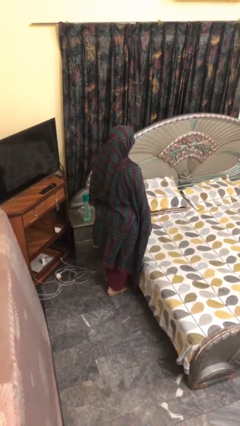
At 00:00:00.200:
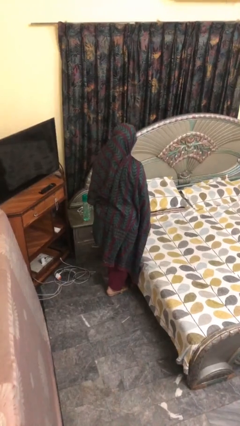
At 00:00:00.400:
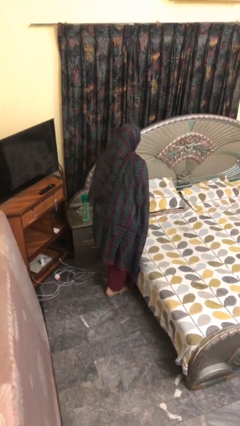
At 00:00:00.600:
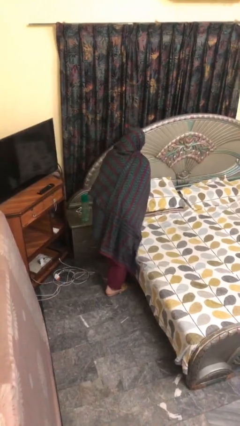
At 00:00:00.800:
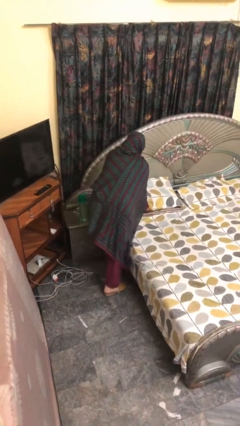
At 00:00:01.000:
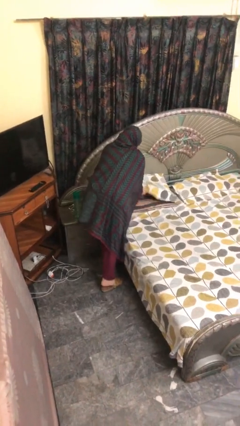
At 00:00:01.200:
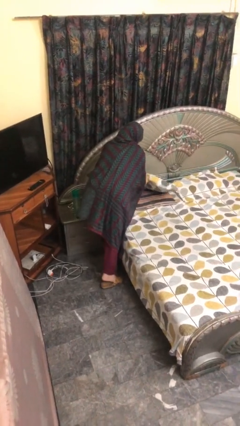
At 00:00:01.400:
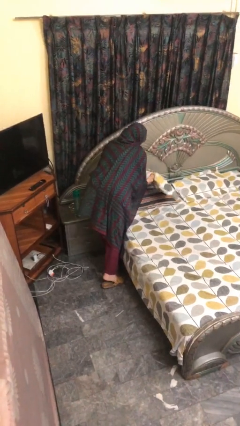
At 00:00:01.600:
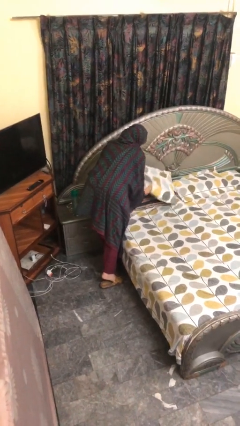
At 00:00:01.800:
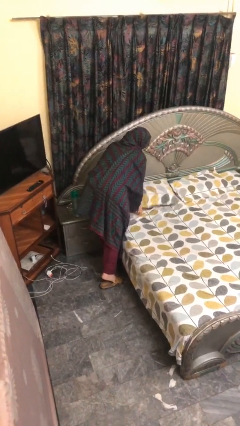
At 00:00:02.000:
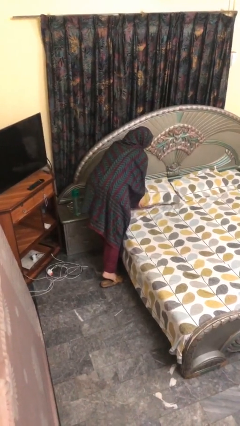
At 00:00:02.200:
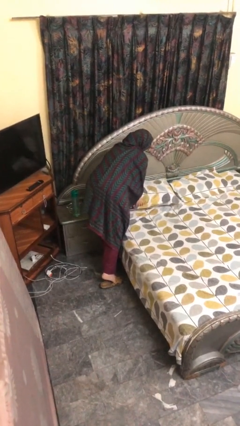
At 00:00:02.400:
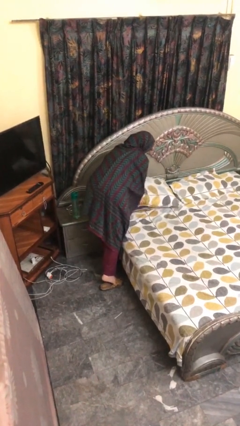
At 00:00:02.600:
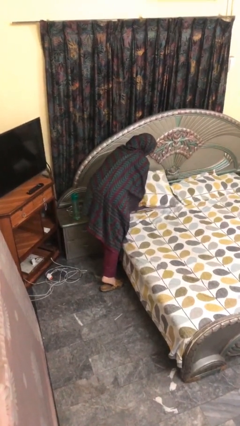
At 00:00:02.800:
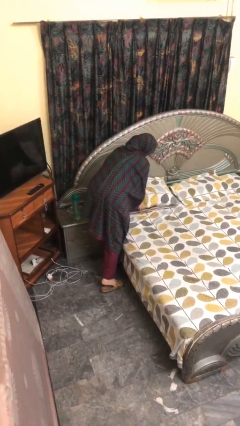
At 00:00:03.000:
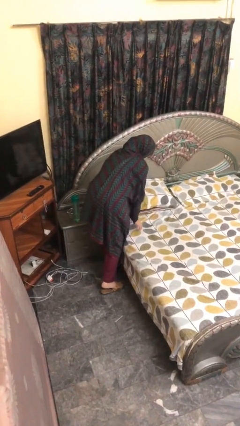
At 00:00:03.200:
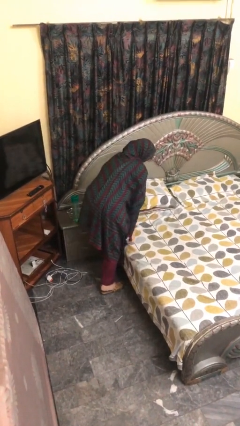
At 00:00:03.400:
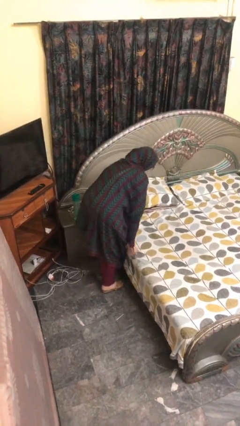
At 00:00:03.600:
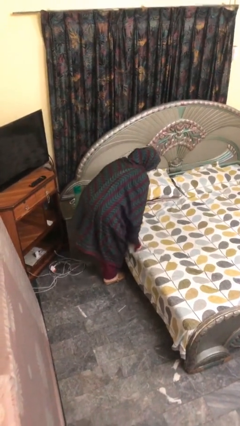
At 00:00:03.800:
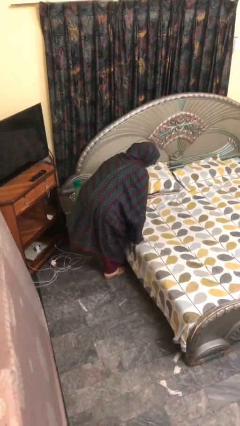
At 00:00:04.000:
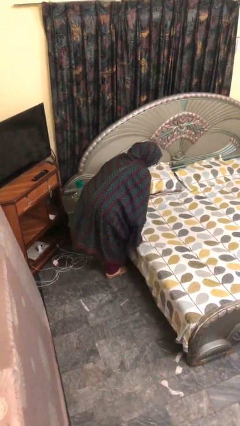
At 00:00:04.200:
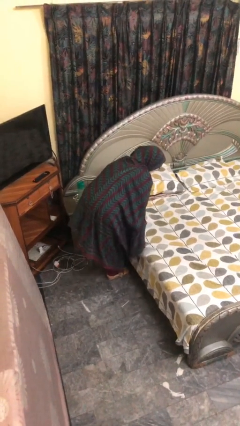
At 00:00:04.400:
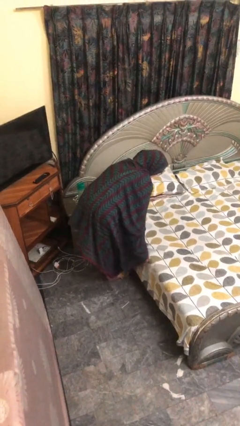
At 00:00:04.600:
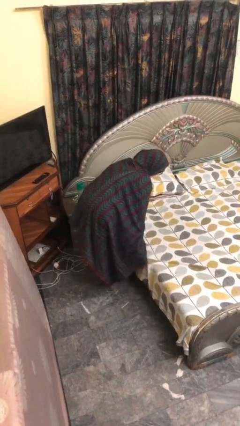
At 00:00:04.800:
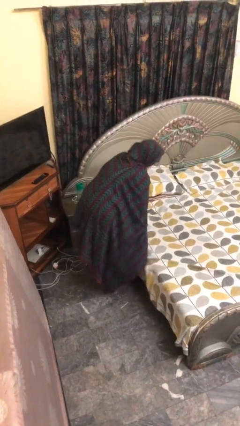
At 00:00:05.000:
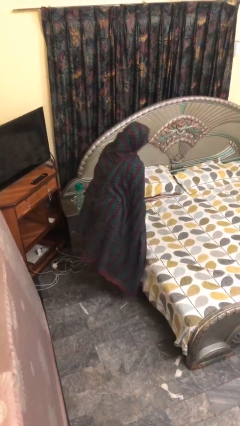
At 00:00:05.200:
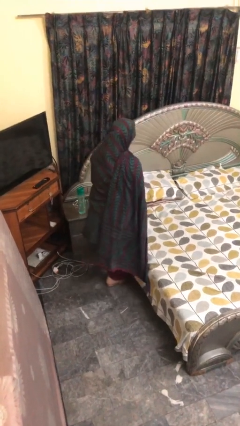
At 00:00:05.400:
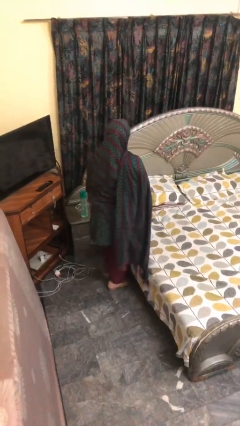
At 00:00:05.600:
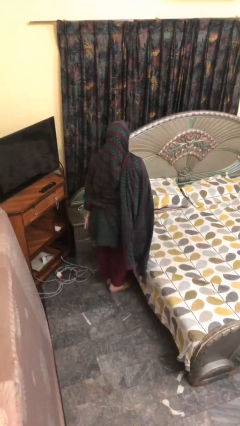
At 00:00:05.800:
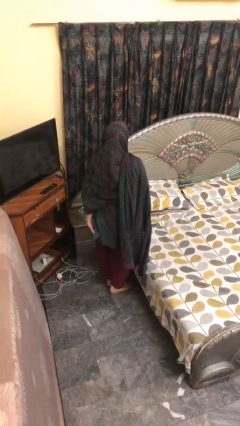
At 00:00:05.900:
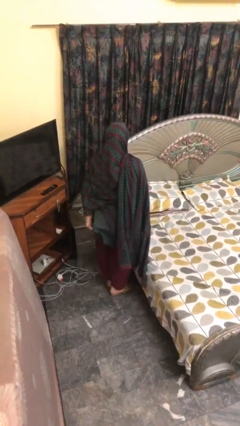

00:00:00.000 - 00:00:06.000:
person makes bed

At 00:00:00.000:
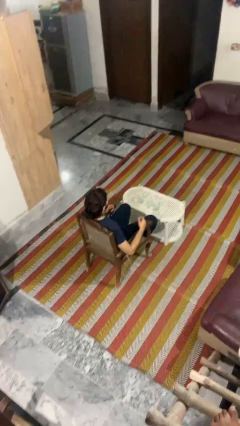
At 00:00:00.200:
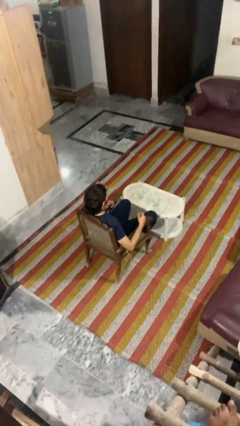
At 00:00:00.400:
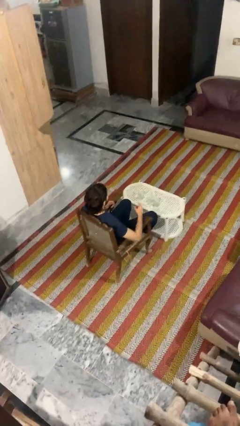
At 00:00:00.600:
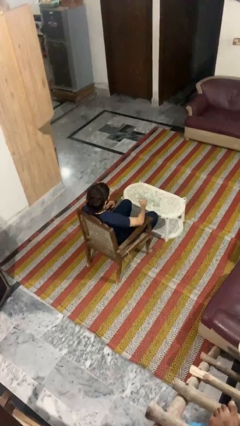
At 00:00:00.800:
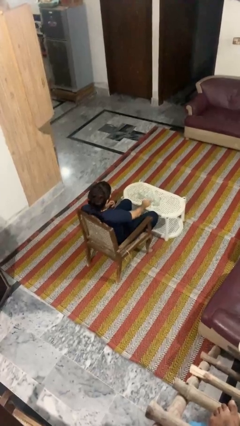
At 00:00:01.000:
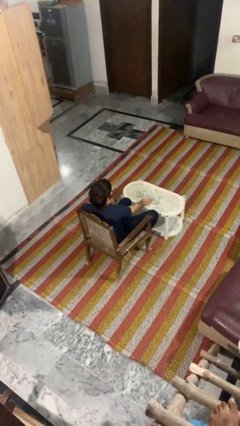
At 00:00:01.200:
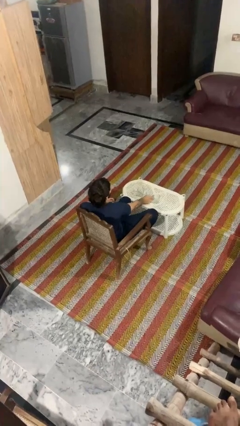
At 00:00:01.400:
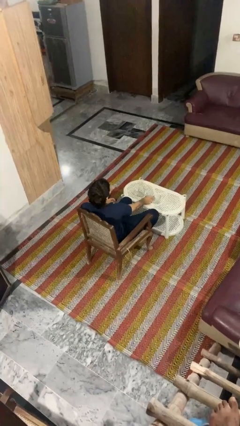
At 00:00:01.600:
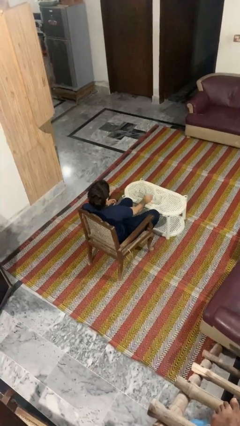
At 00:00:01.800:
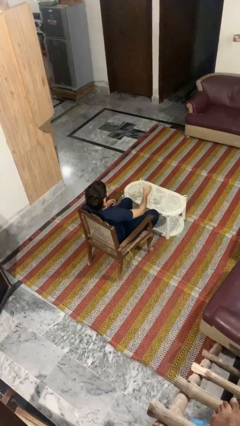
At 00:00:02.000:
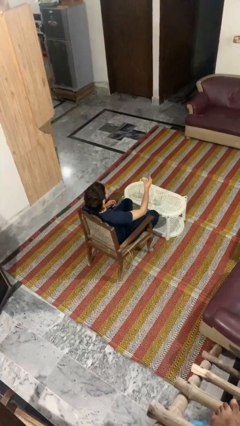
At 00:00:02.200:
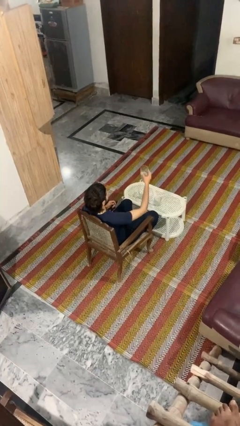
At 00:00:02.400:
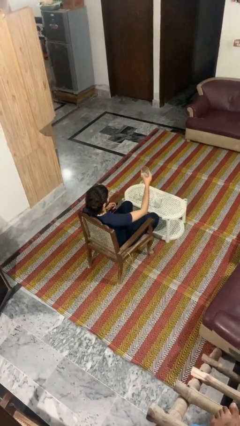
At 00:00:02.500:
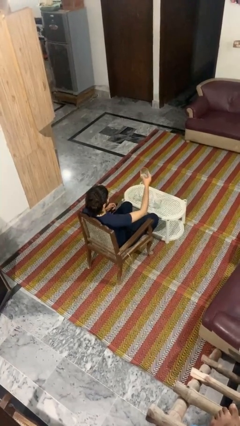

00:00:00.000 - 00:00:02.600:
person picks up object from table

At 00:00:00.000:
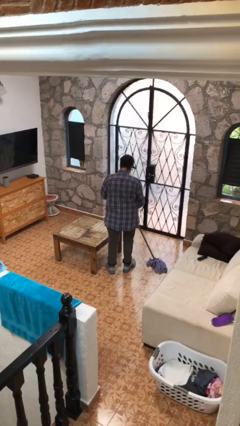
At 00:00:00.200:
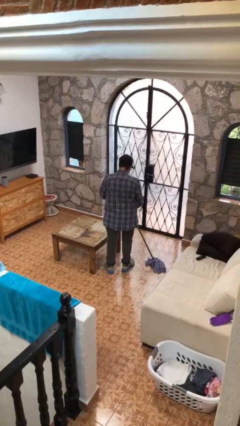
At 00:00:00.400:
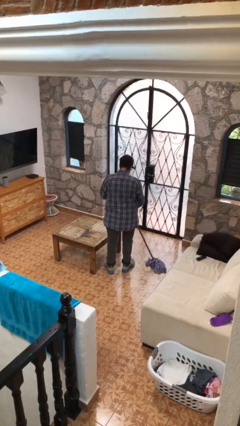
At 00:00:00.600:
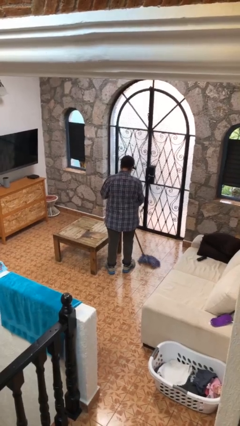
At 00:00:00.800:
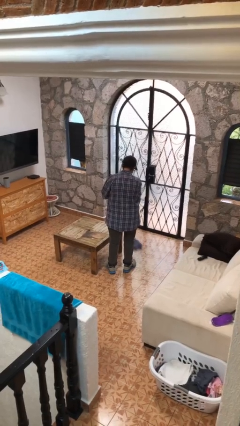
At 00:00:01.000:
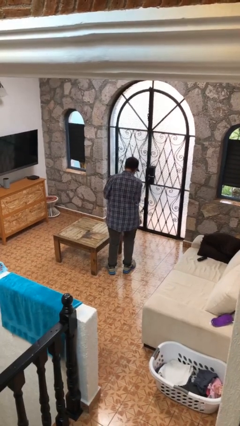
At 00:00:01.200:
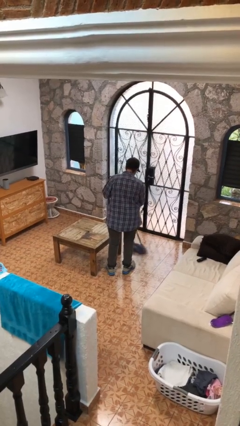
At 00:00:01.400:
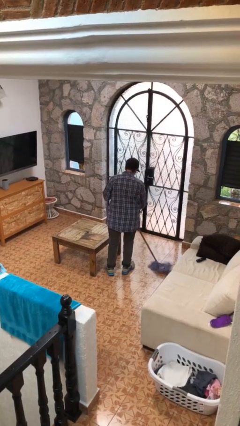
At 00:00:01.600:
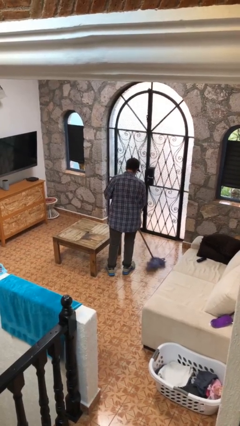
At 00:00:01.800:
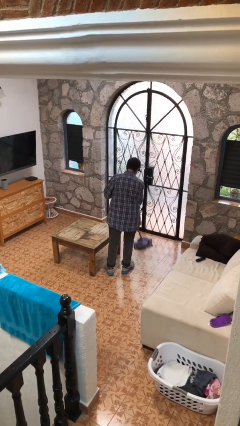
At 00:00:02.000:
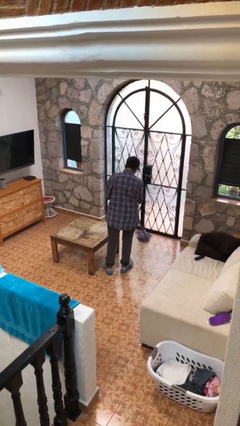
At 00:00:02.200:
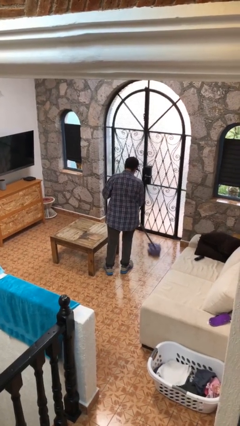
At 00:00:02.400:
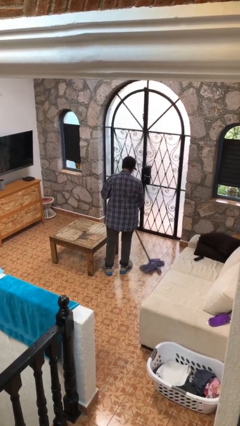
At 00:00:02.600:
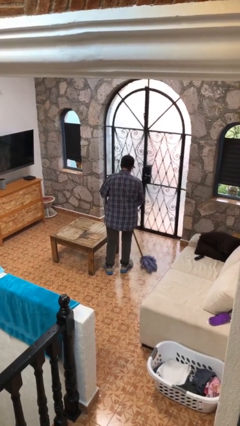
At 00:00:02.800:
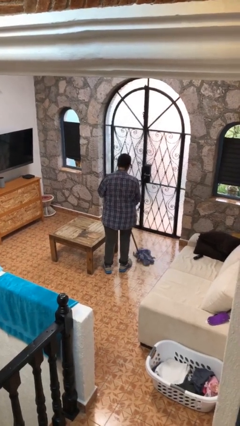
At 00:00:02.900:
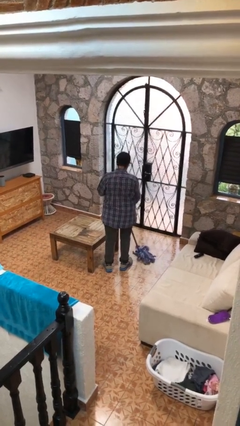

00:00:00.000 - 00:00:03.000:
person mops

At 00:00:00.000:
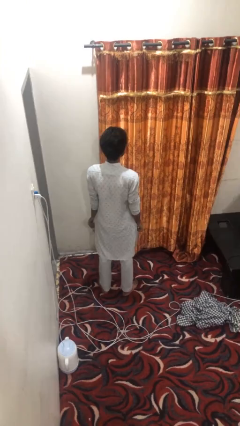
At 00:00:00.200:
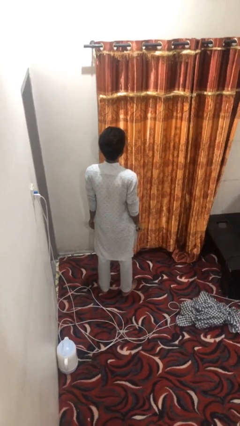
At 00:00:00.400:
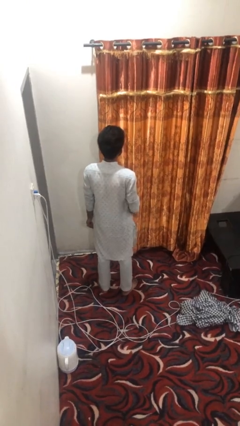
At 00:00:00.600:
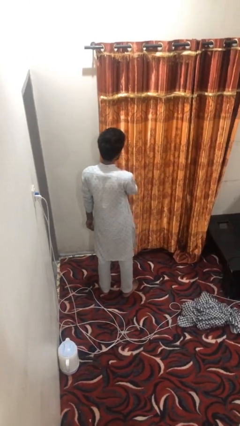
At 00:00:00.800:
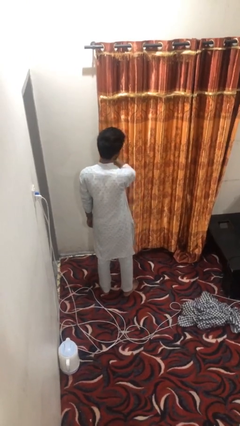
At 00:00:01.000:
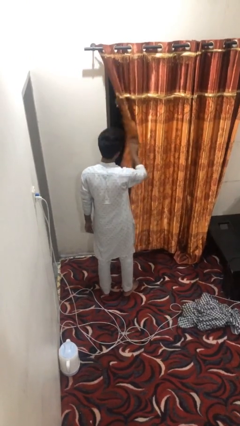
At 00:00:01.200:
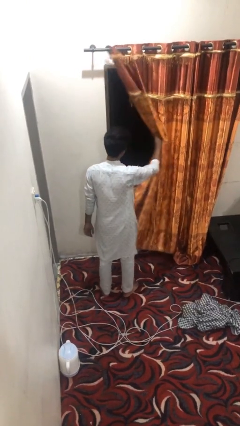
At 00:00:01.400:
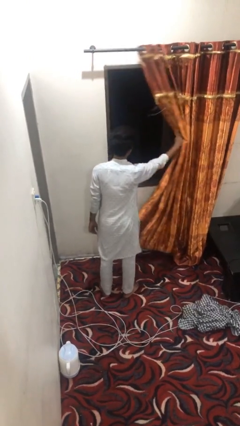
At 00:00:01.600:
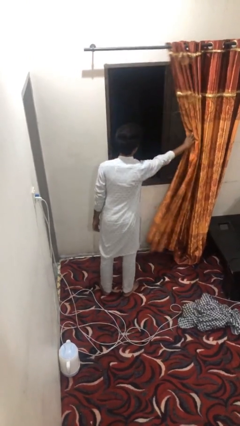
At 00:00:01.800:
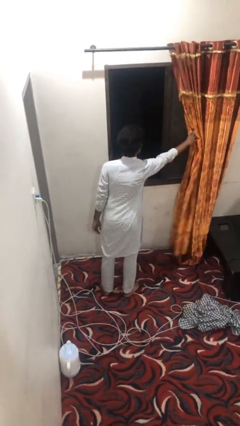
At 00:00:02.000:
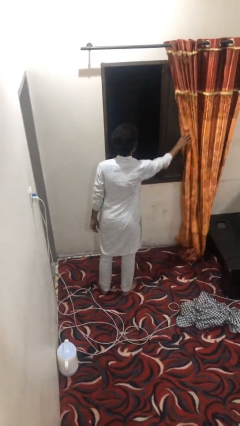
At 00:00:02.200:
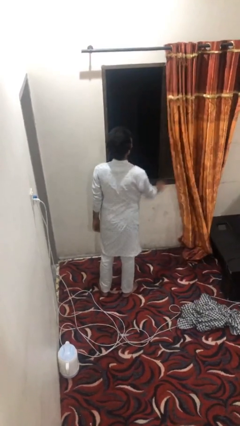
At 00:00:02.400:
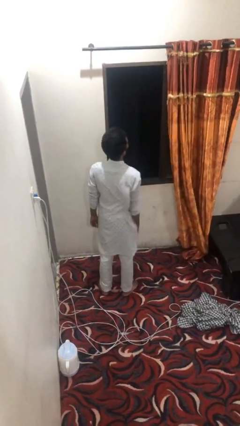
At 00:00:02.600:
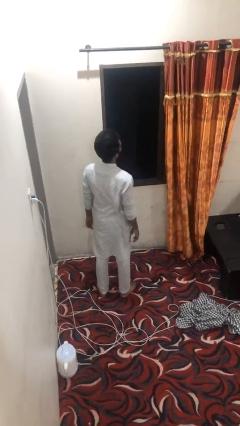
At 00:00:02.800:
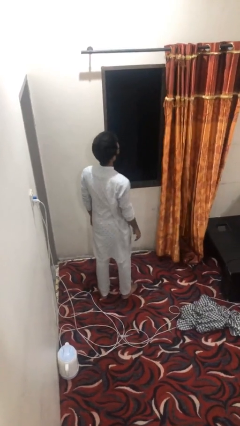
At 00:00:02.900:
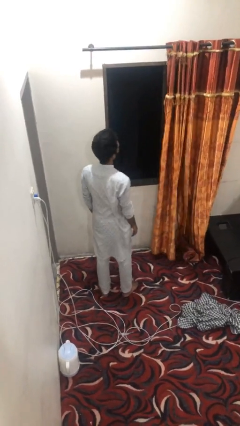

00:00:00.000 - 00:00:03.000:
person opens curtains

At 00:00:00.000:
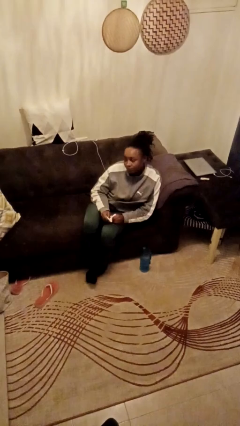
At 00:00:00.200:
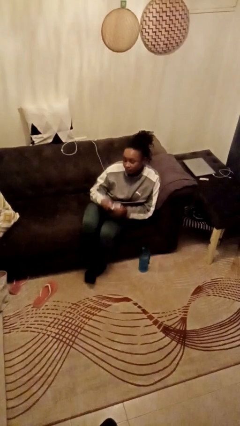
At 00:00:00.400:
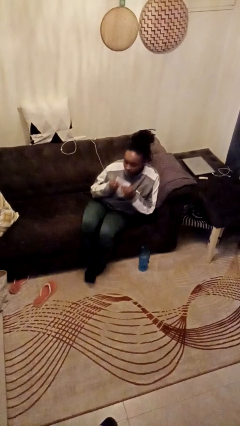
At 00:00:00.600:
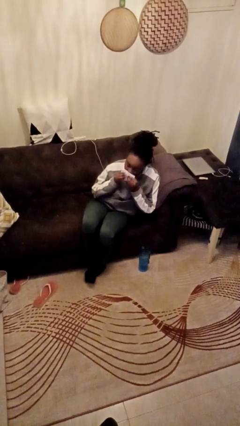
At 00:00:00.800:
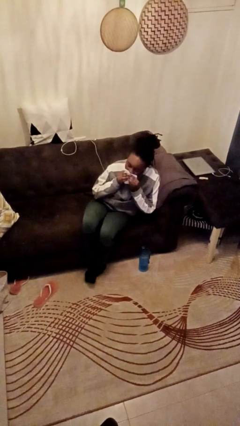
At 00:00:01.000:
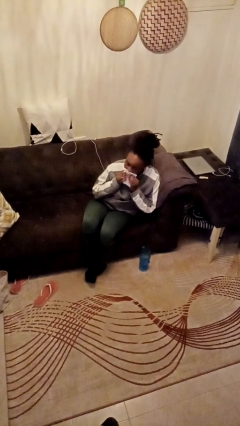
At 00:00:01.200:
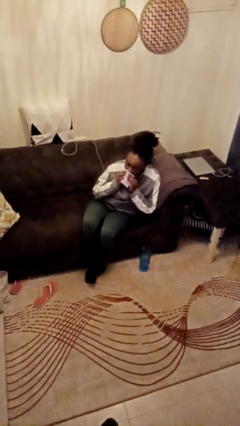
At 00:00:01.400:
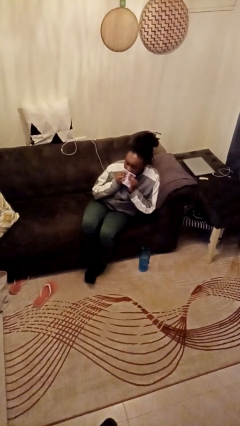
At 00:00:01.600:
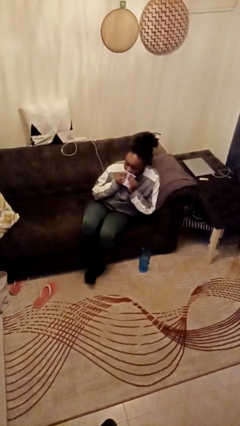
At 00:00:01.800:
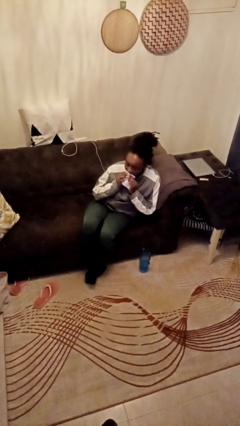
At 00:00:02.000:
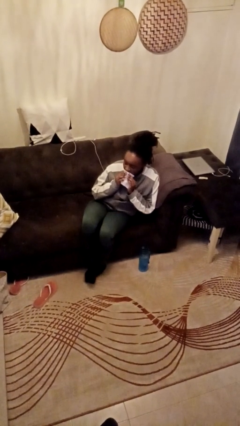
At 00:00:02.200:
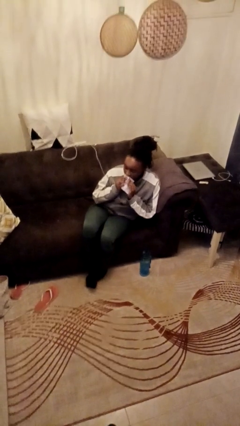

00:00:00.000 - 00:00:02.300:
person wipes mouth with napkin

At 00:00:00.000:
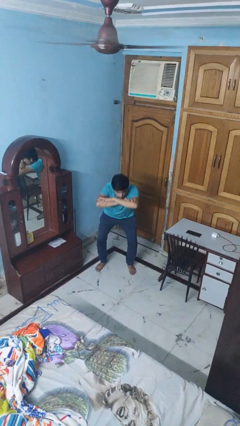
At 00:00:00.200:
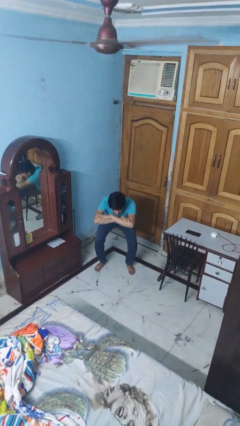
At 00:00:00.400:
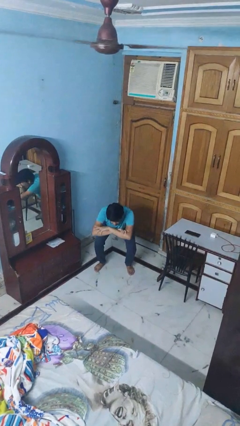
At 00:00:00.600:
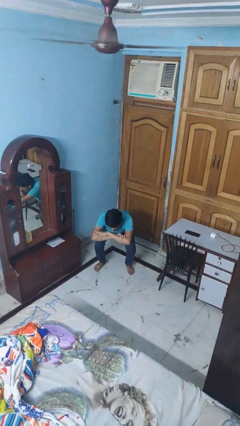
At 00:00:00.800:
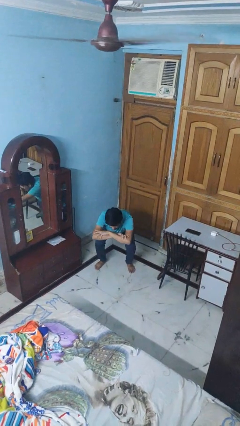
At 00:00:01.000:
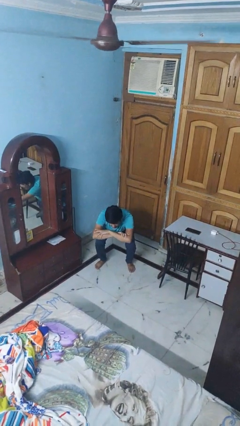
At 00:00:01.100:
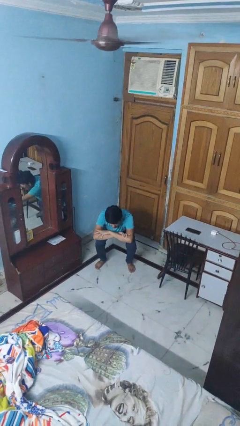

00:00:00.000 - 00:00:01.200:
person squats
